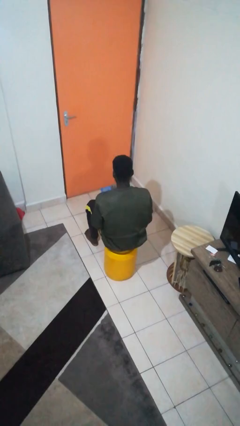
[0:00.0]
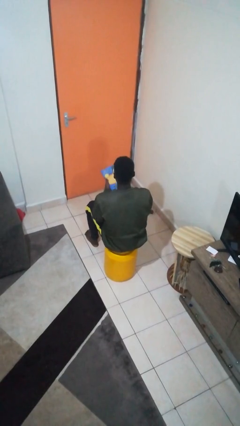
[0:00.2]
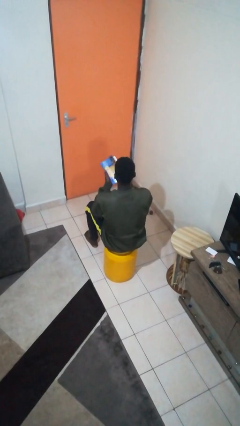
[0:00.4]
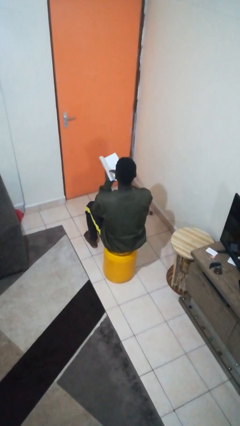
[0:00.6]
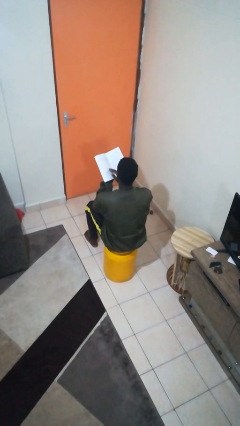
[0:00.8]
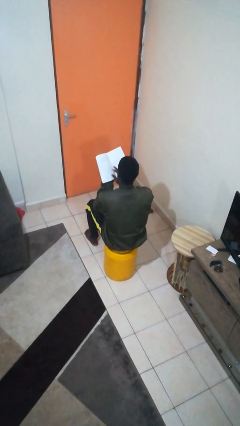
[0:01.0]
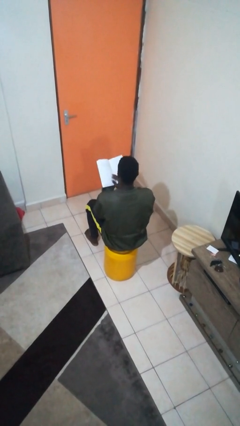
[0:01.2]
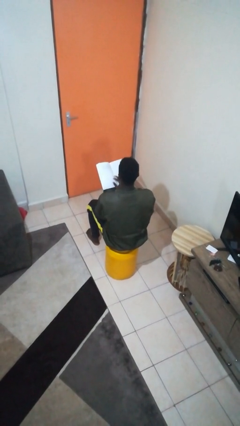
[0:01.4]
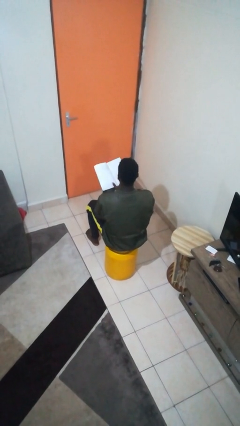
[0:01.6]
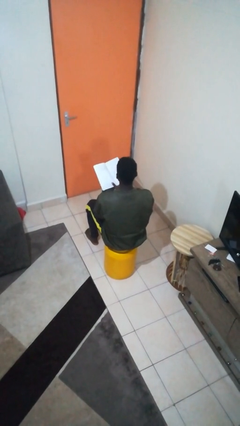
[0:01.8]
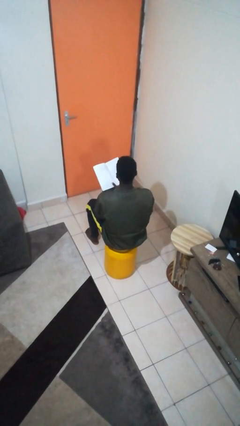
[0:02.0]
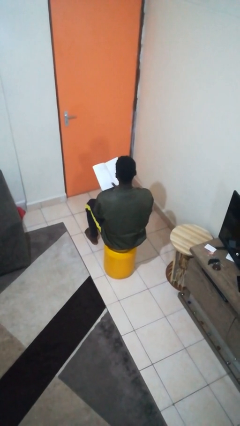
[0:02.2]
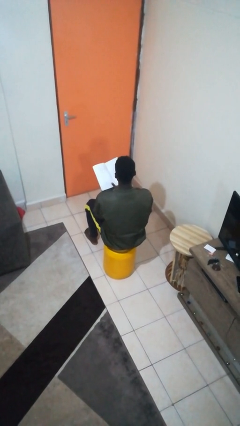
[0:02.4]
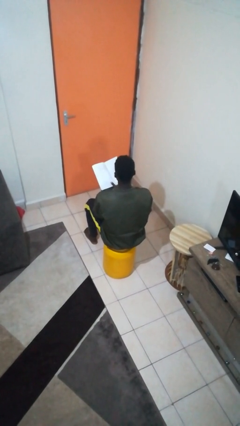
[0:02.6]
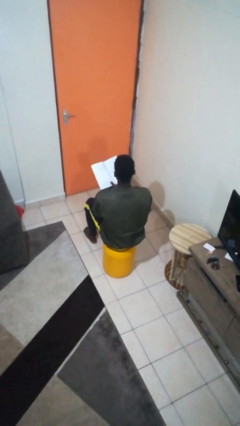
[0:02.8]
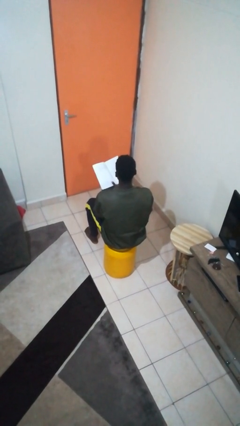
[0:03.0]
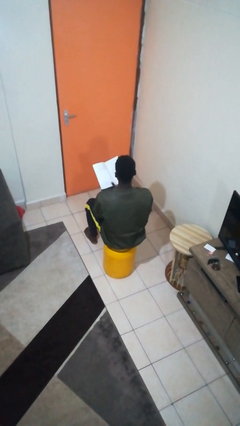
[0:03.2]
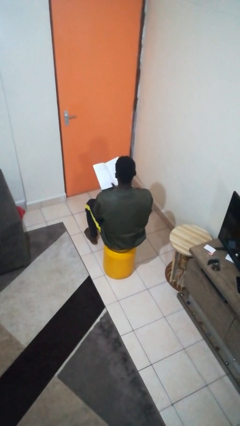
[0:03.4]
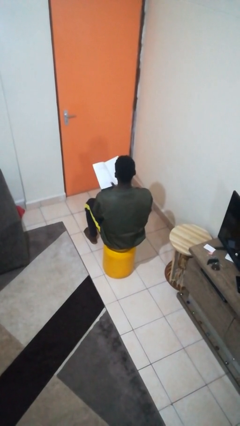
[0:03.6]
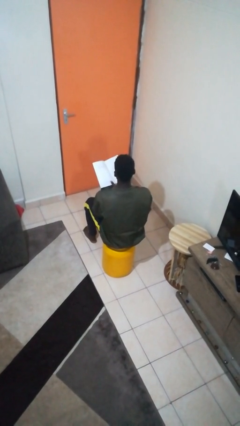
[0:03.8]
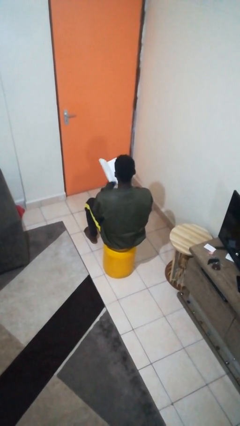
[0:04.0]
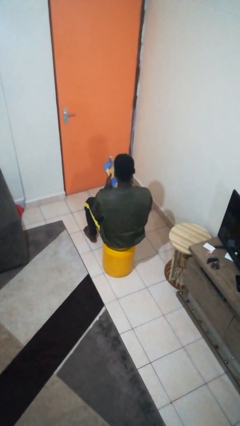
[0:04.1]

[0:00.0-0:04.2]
person reads book

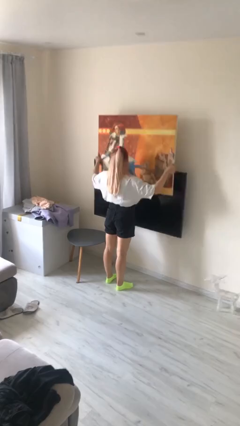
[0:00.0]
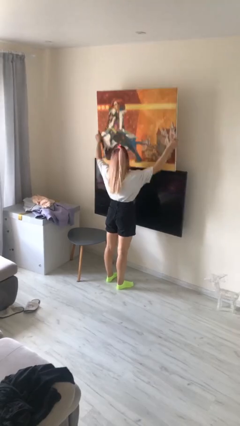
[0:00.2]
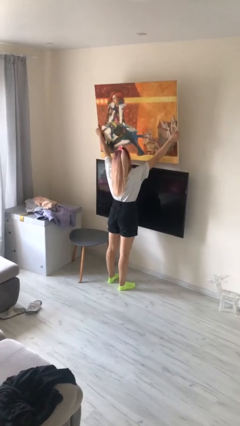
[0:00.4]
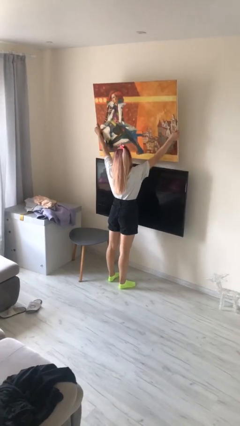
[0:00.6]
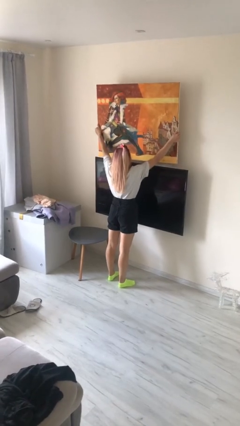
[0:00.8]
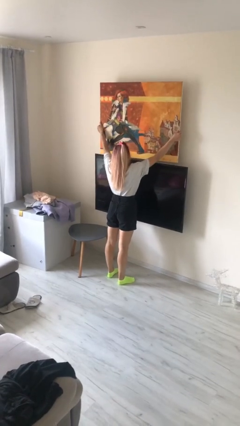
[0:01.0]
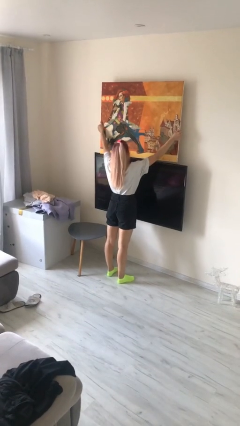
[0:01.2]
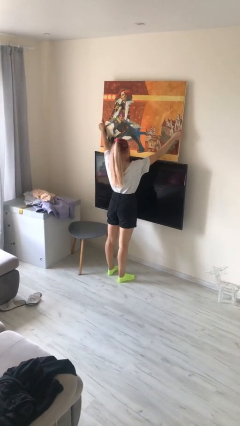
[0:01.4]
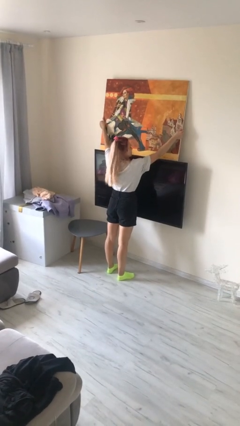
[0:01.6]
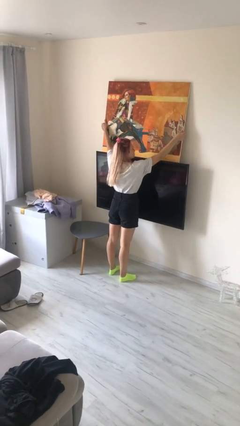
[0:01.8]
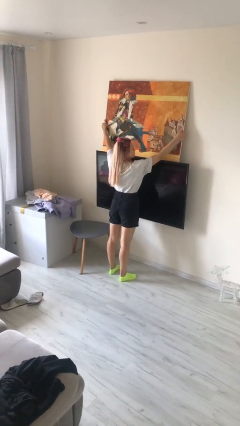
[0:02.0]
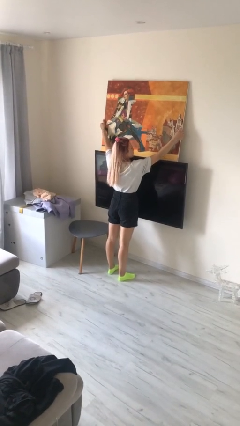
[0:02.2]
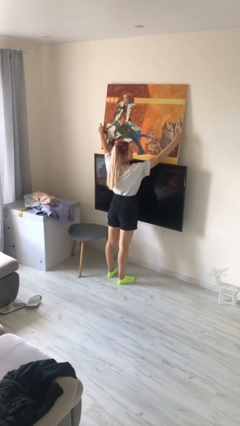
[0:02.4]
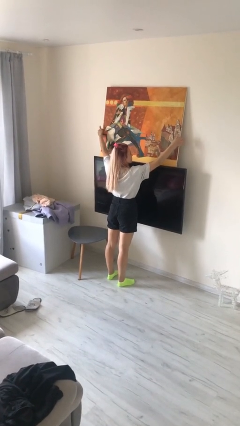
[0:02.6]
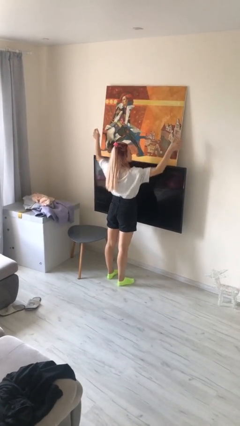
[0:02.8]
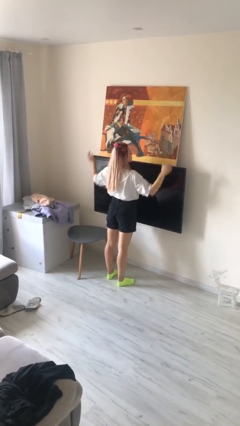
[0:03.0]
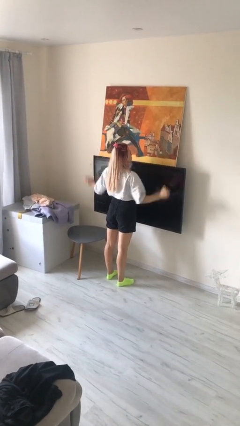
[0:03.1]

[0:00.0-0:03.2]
person puts up picture frame

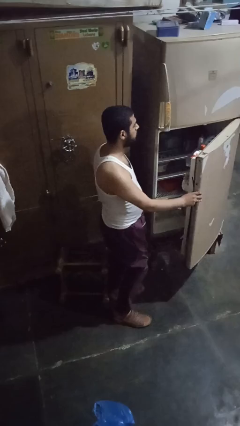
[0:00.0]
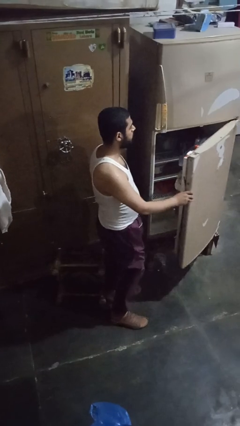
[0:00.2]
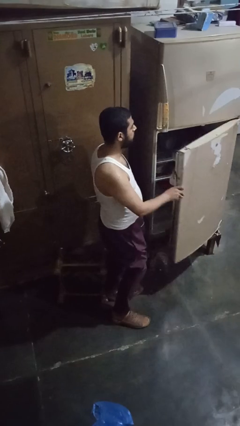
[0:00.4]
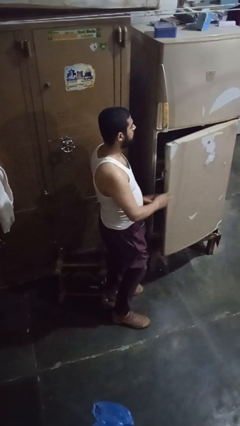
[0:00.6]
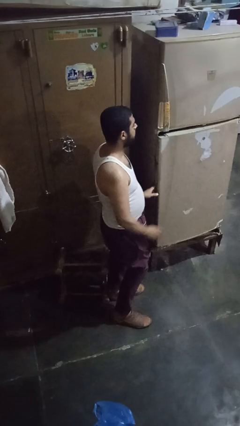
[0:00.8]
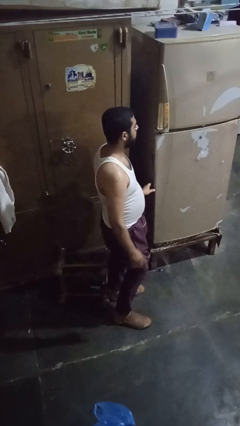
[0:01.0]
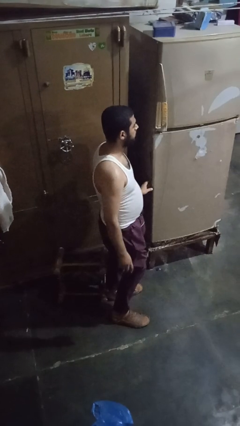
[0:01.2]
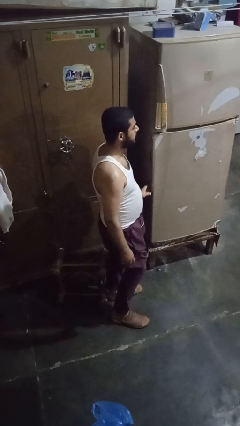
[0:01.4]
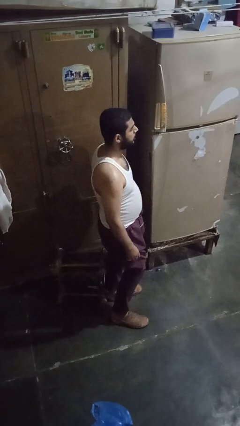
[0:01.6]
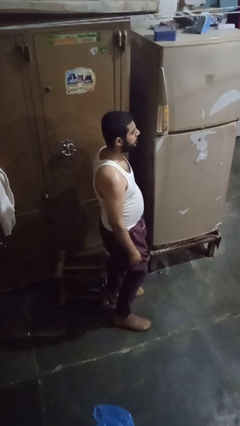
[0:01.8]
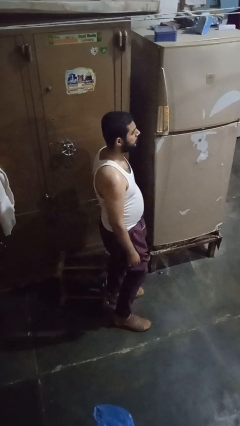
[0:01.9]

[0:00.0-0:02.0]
person closes refrigerator

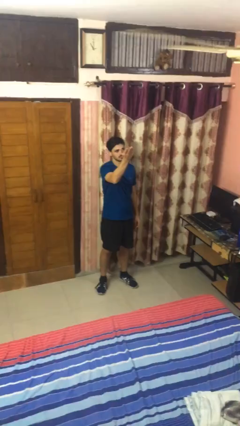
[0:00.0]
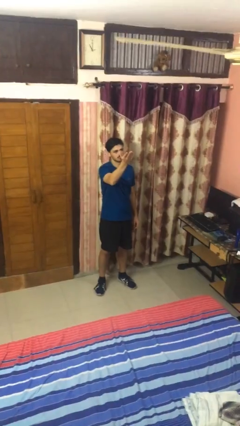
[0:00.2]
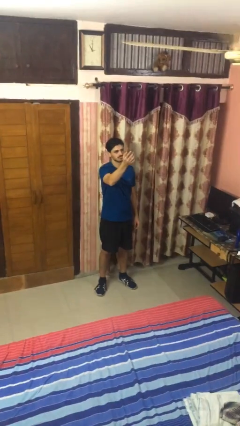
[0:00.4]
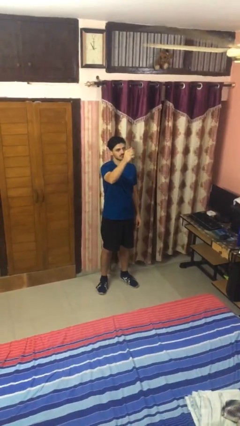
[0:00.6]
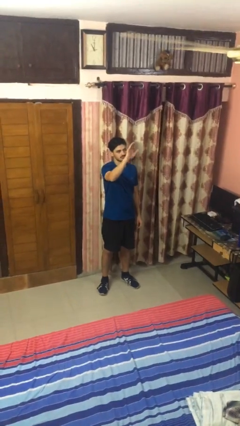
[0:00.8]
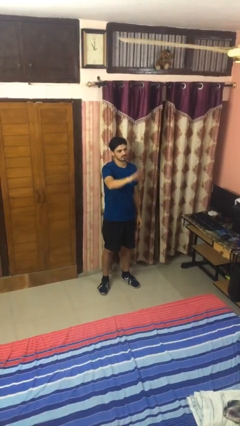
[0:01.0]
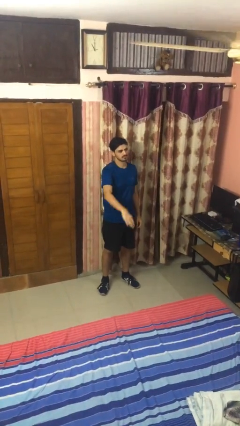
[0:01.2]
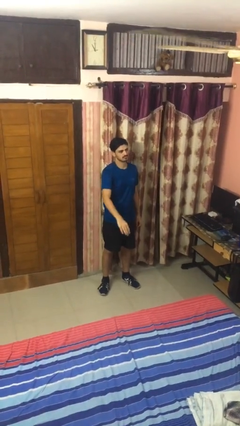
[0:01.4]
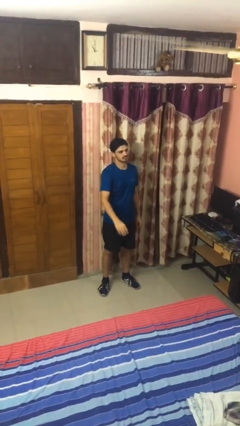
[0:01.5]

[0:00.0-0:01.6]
person gestures swipe down

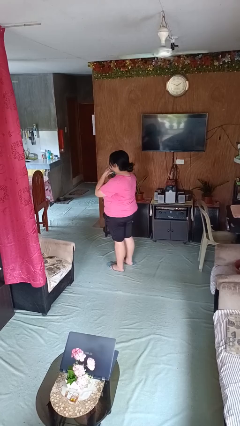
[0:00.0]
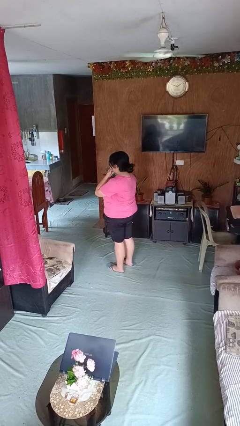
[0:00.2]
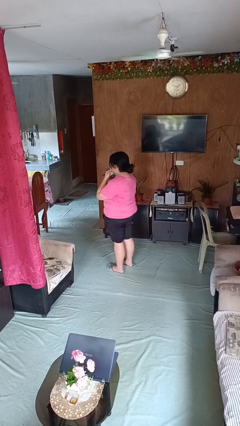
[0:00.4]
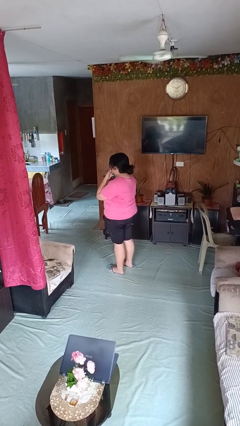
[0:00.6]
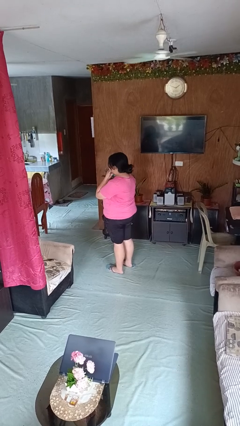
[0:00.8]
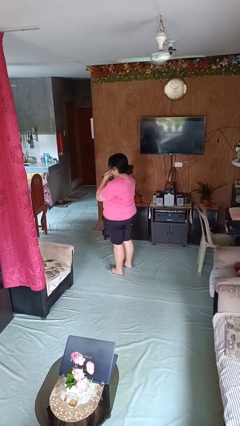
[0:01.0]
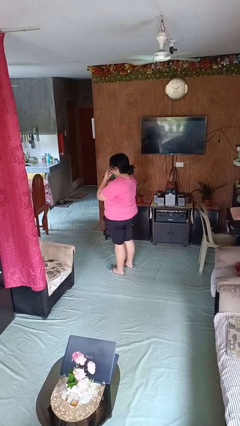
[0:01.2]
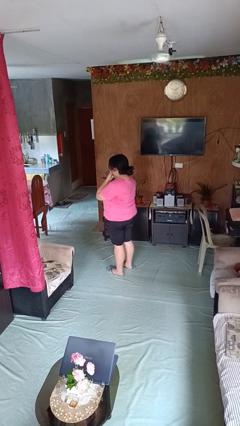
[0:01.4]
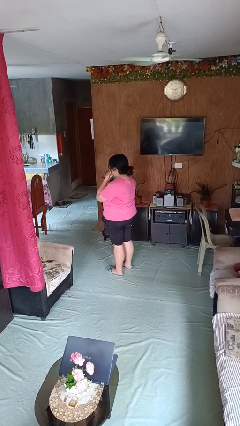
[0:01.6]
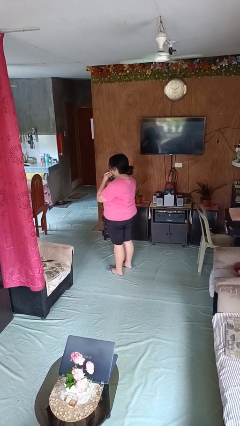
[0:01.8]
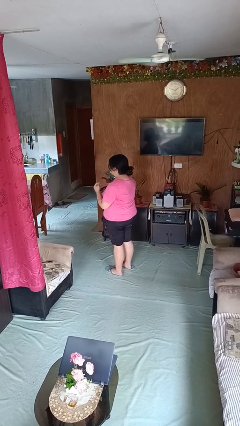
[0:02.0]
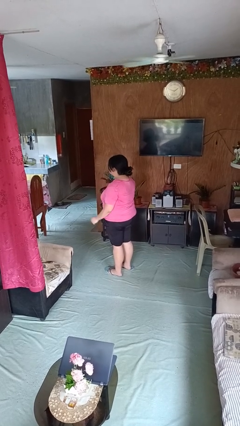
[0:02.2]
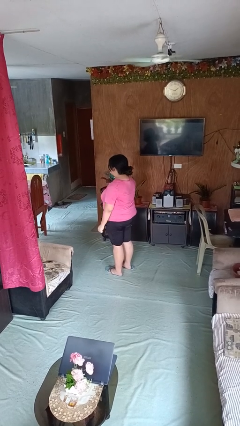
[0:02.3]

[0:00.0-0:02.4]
person strokes chin

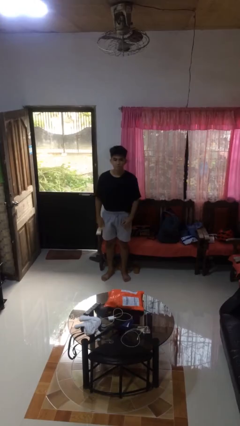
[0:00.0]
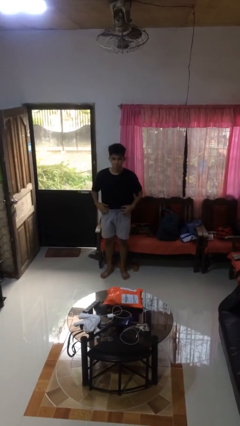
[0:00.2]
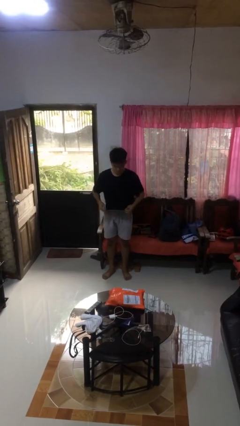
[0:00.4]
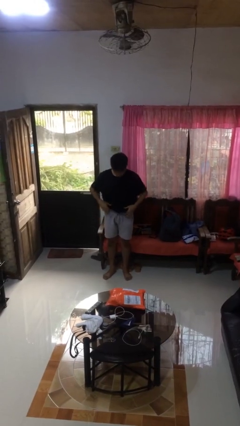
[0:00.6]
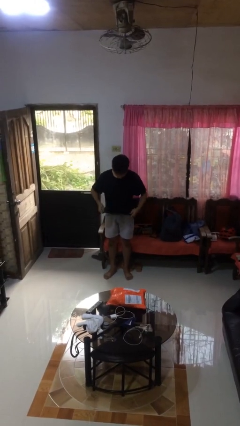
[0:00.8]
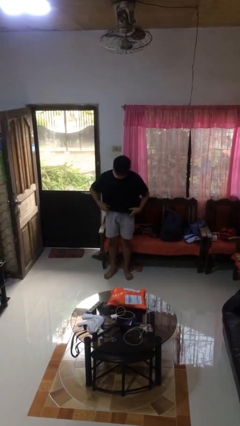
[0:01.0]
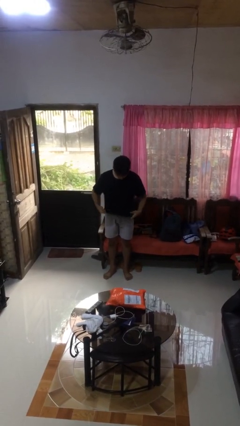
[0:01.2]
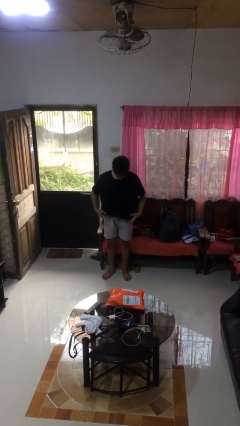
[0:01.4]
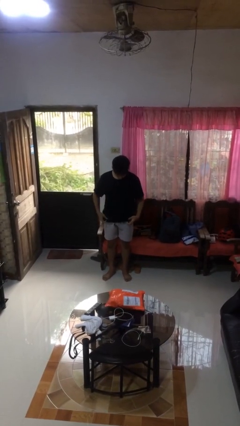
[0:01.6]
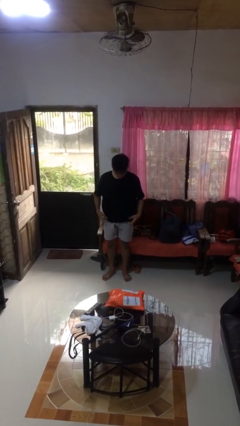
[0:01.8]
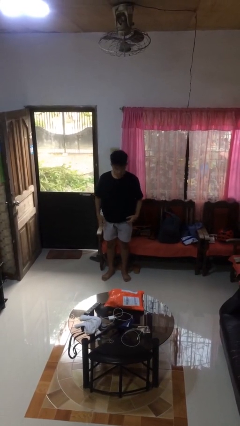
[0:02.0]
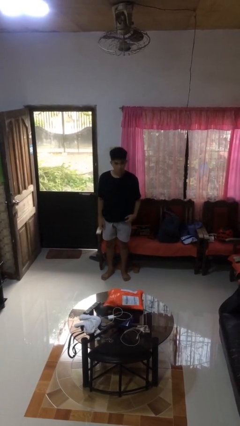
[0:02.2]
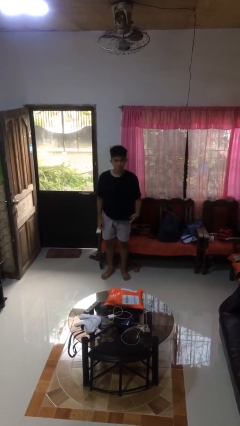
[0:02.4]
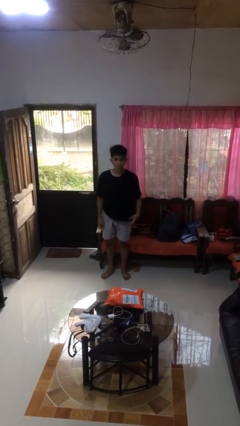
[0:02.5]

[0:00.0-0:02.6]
person untucks shirt

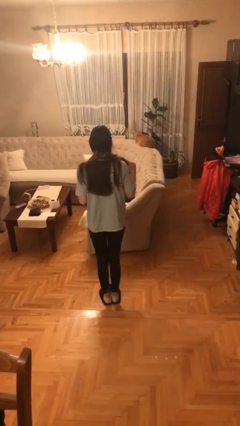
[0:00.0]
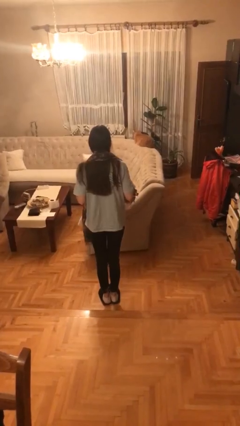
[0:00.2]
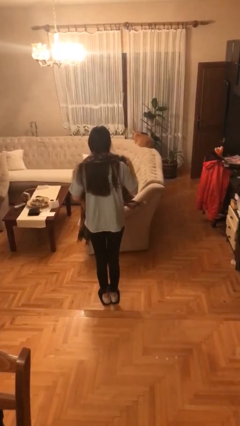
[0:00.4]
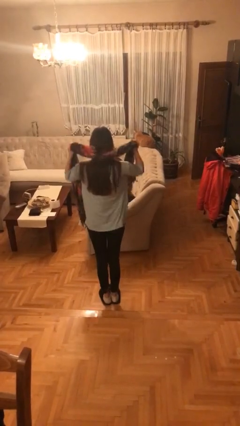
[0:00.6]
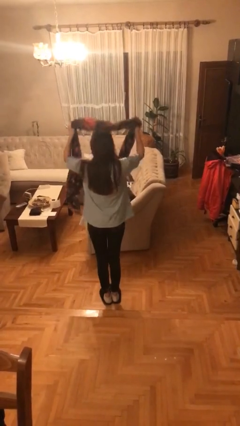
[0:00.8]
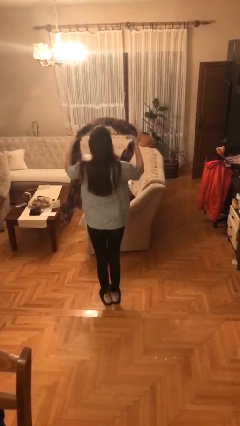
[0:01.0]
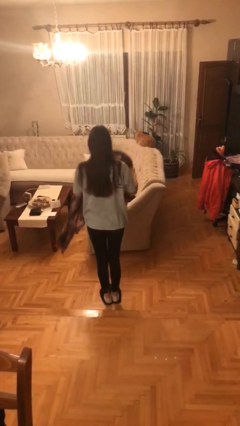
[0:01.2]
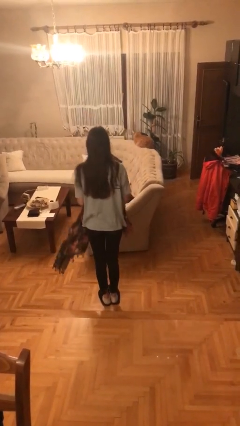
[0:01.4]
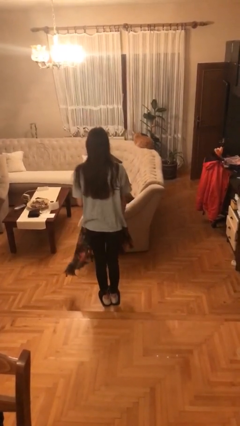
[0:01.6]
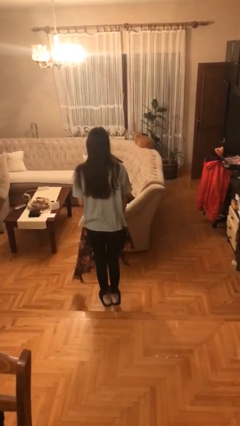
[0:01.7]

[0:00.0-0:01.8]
person takes off scarf
